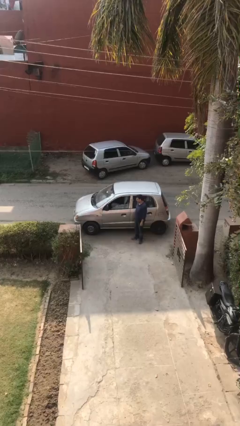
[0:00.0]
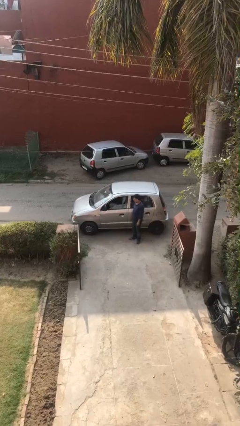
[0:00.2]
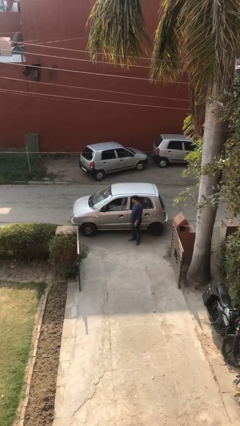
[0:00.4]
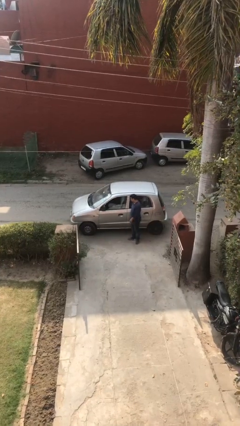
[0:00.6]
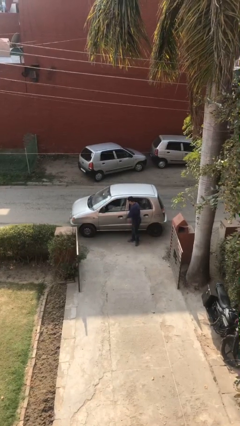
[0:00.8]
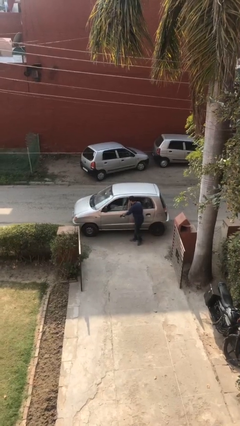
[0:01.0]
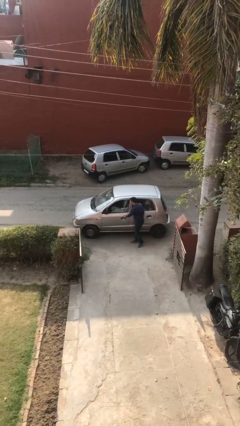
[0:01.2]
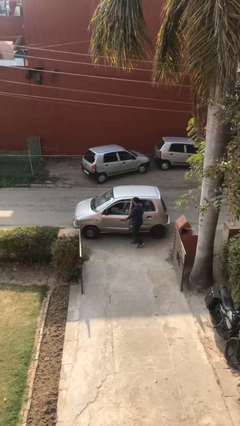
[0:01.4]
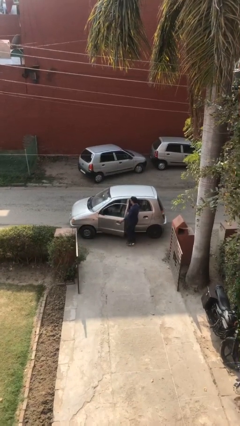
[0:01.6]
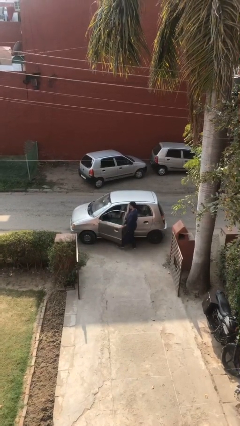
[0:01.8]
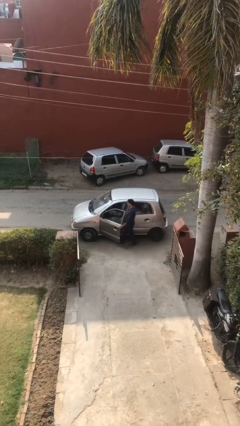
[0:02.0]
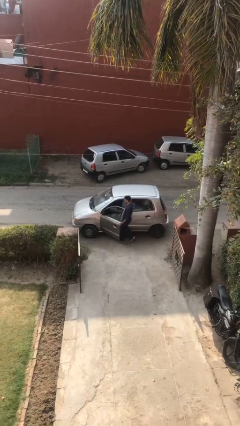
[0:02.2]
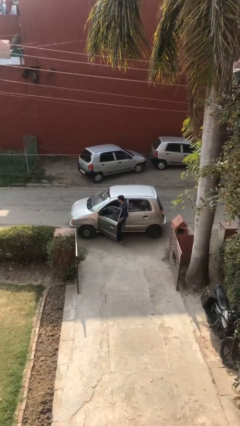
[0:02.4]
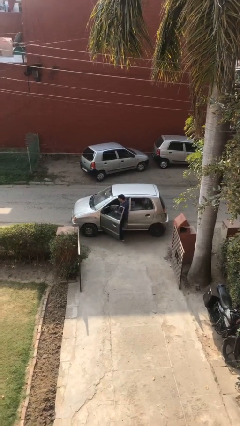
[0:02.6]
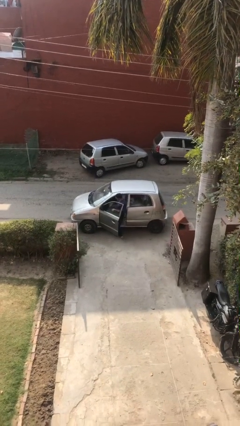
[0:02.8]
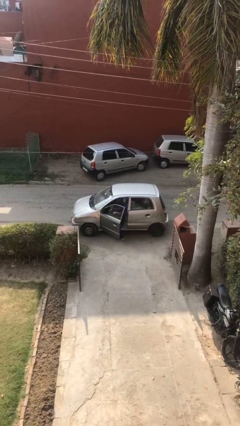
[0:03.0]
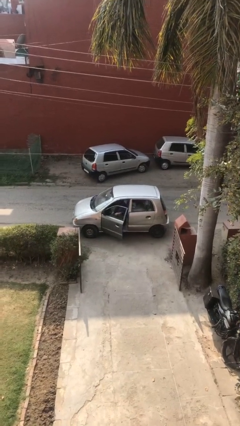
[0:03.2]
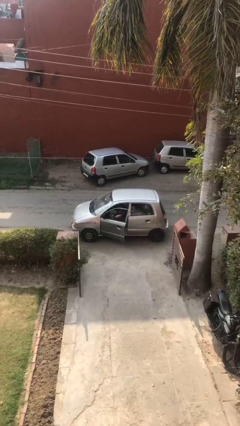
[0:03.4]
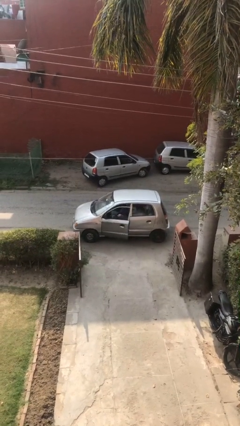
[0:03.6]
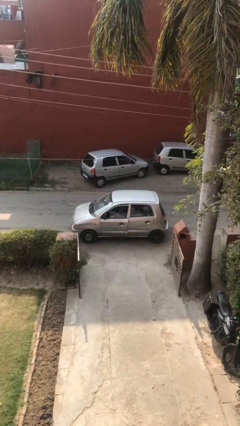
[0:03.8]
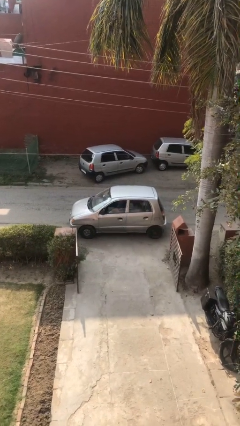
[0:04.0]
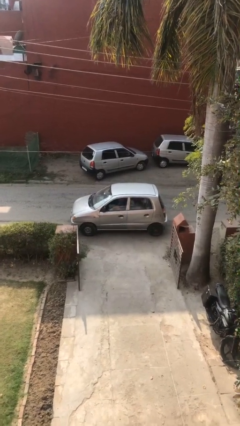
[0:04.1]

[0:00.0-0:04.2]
car picks up person

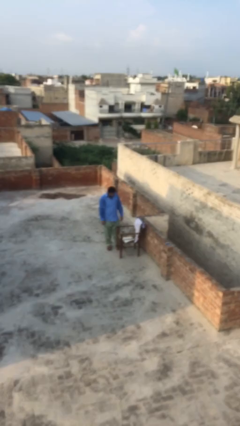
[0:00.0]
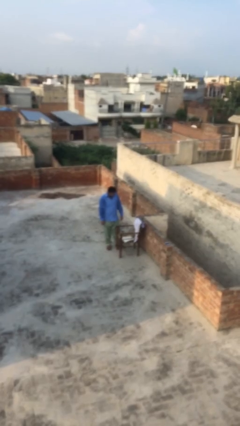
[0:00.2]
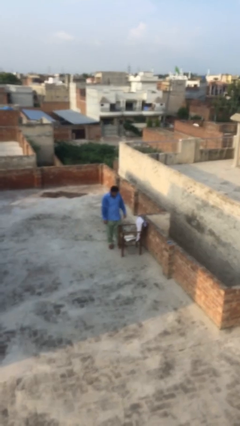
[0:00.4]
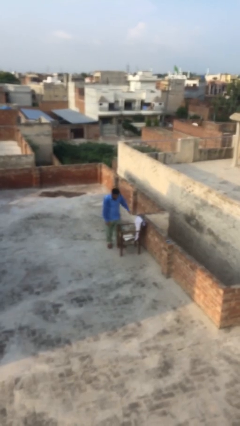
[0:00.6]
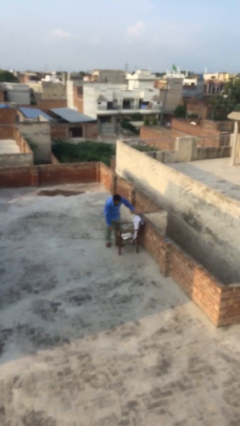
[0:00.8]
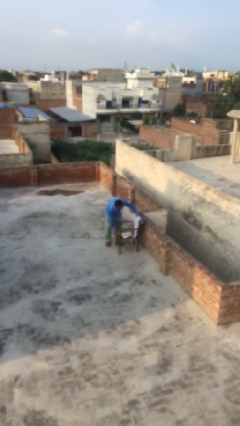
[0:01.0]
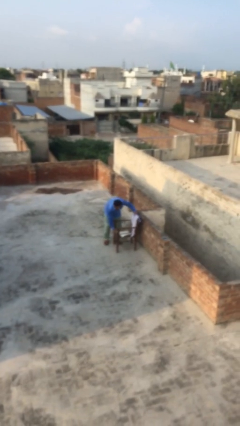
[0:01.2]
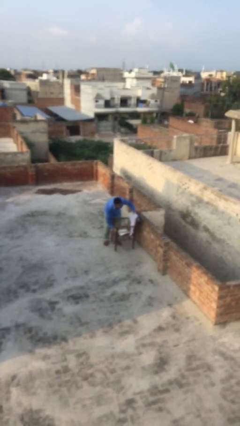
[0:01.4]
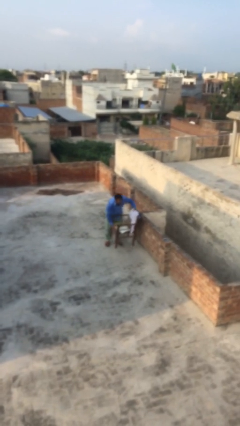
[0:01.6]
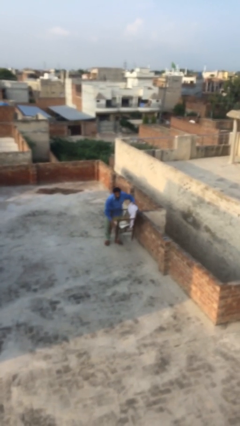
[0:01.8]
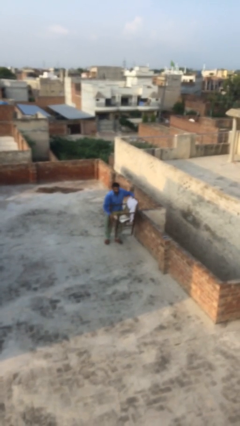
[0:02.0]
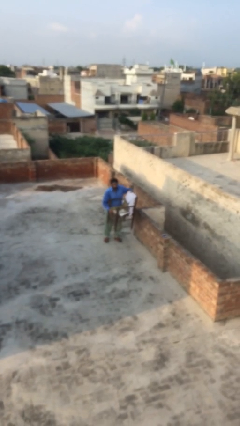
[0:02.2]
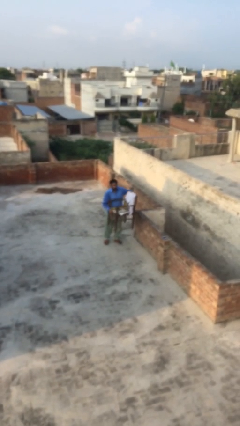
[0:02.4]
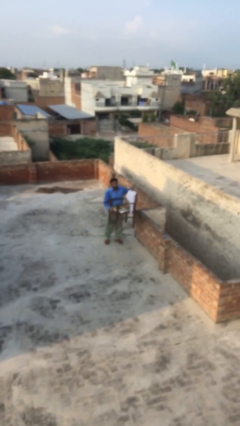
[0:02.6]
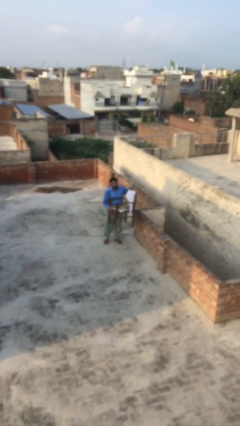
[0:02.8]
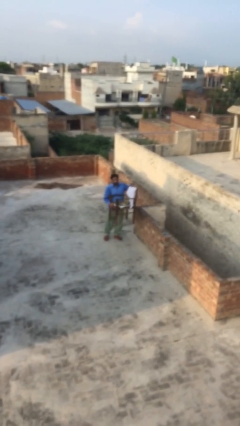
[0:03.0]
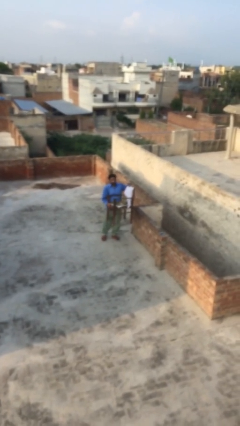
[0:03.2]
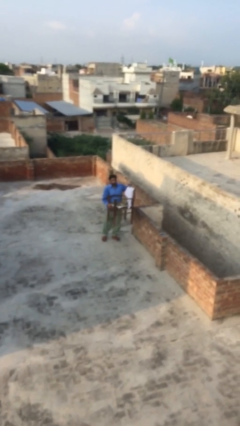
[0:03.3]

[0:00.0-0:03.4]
person picks up object from floor

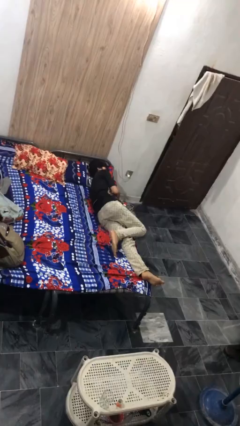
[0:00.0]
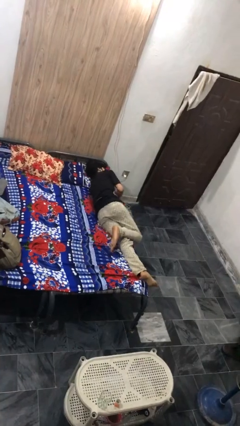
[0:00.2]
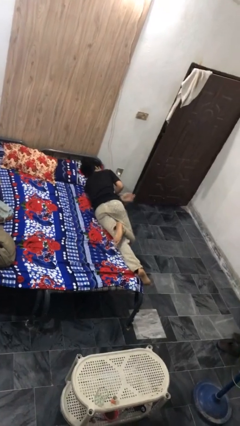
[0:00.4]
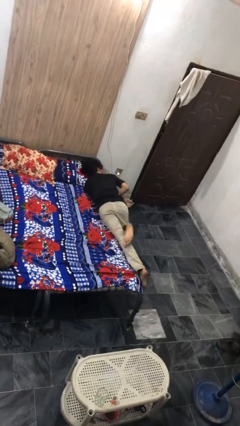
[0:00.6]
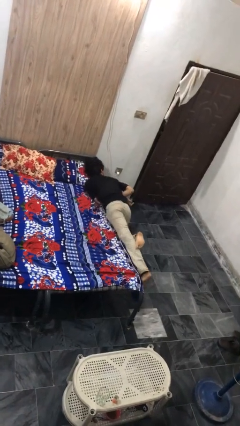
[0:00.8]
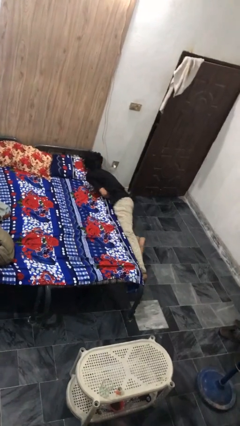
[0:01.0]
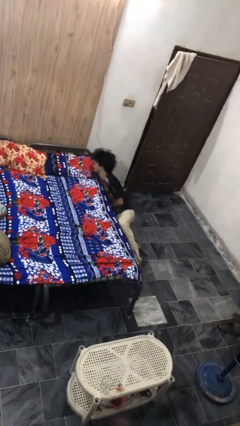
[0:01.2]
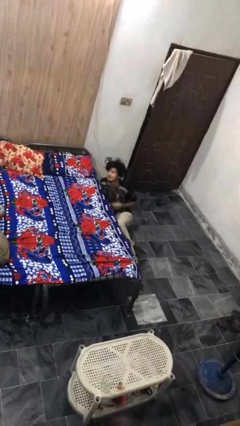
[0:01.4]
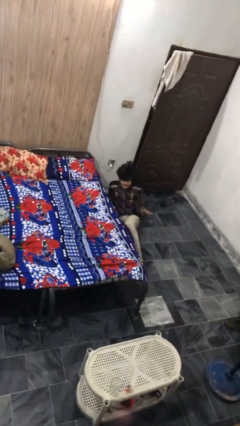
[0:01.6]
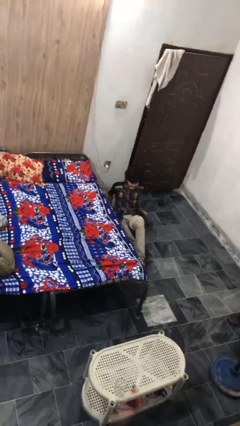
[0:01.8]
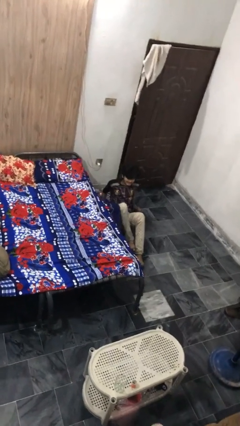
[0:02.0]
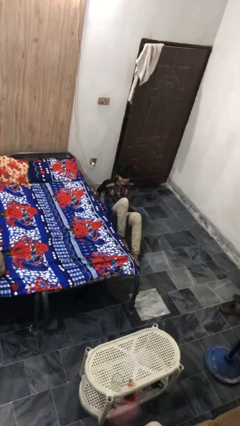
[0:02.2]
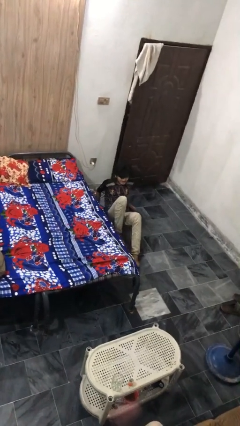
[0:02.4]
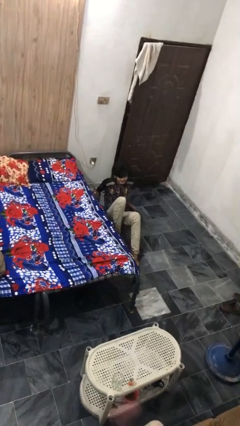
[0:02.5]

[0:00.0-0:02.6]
person falls from bed

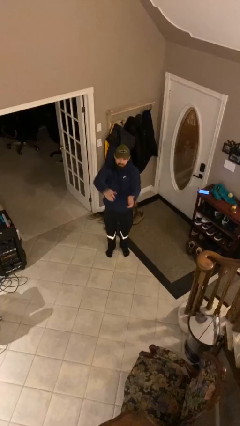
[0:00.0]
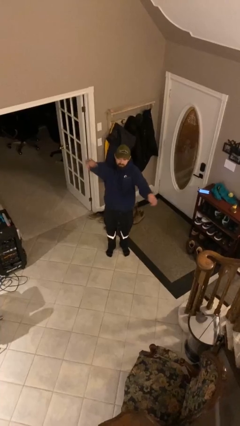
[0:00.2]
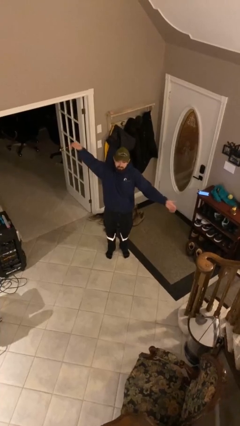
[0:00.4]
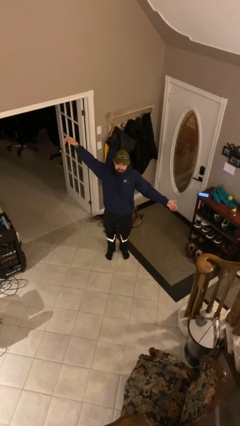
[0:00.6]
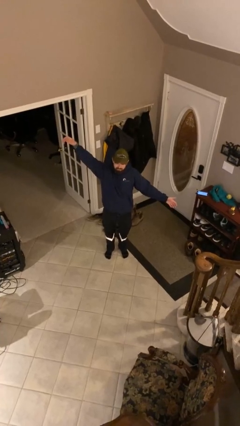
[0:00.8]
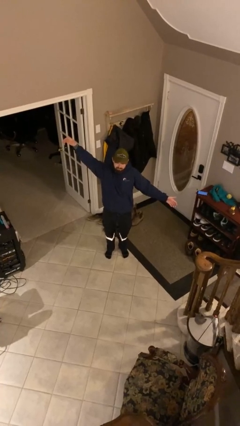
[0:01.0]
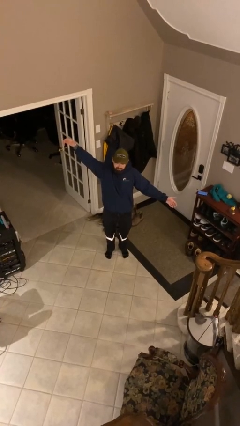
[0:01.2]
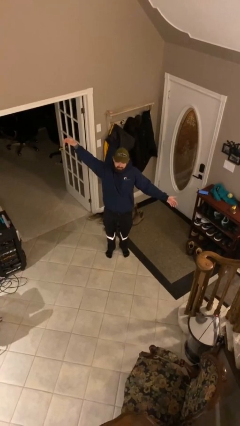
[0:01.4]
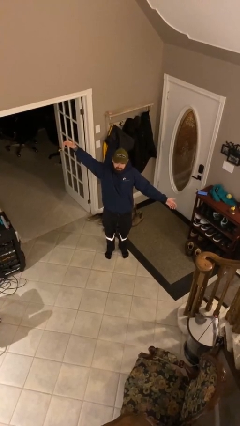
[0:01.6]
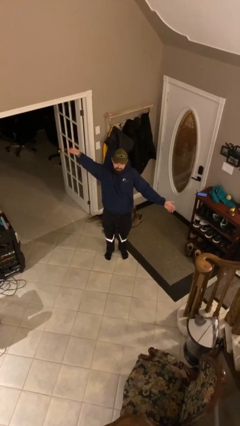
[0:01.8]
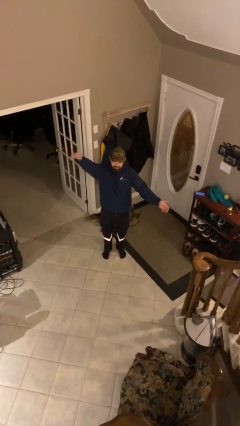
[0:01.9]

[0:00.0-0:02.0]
person gestures zoom in

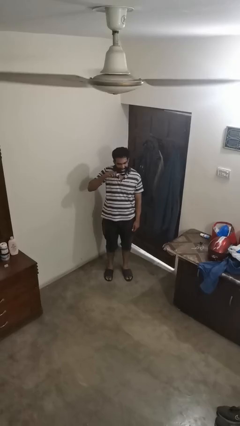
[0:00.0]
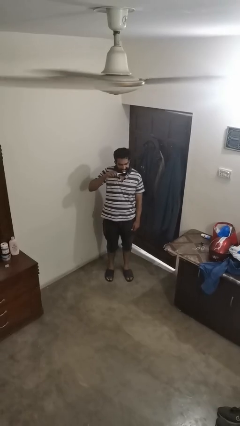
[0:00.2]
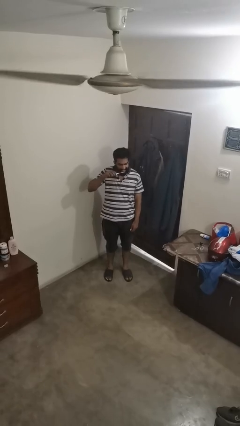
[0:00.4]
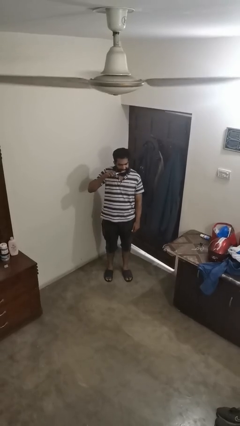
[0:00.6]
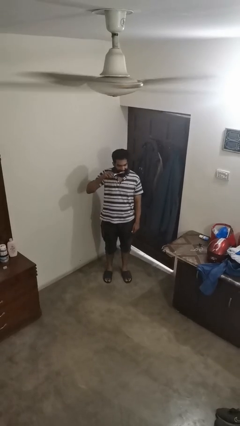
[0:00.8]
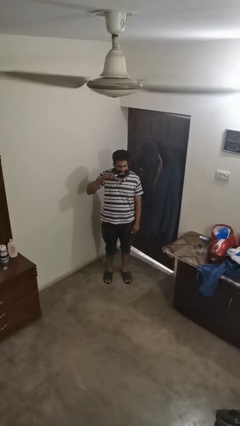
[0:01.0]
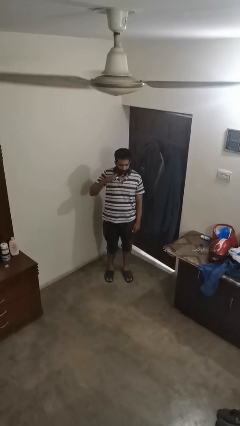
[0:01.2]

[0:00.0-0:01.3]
person brushes teeth

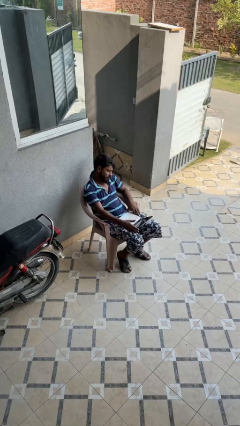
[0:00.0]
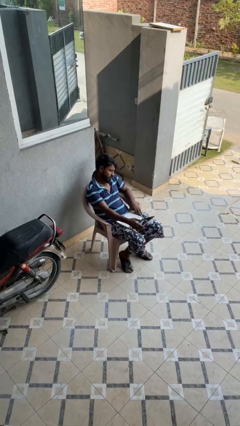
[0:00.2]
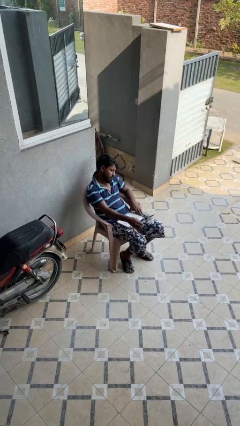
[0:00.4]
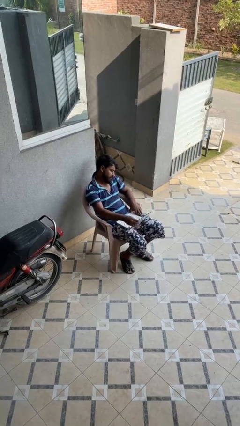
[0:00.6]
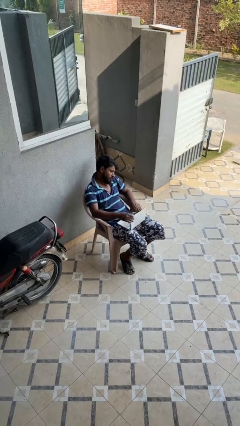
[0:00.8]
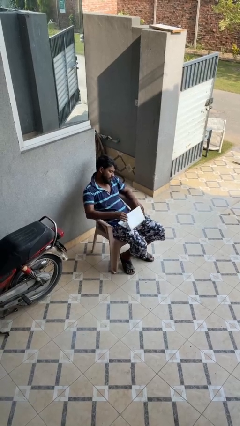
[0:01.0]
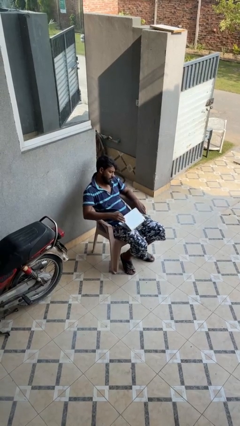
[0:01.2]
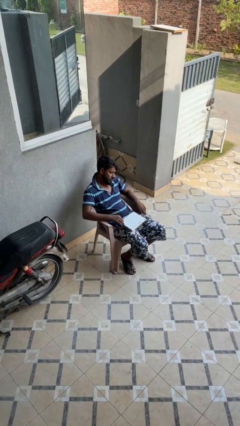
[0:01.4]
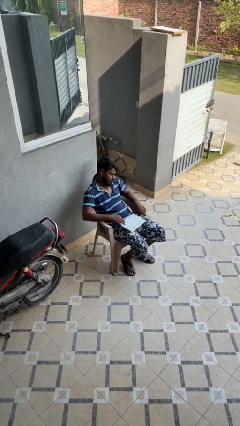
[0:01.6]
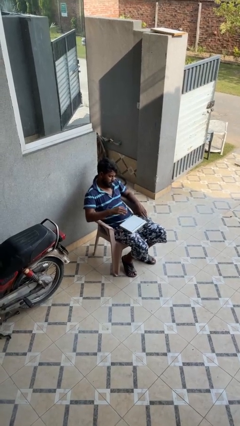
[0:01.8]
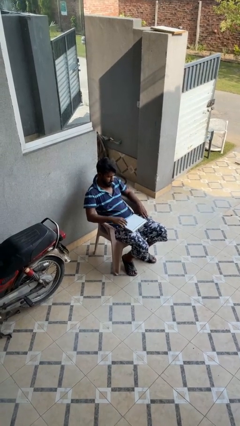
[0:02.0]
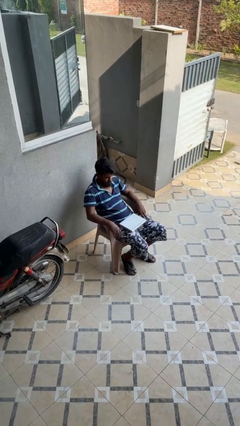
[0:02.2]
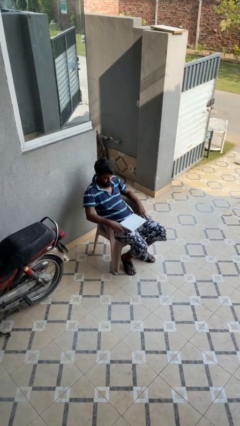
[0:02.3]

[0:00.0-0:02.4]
person closes laptop

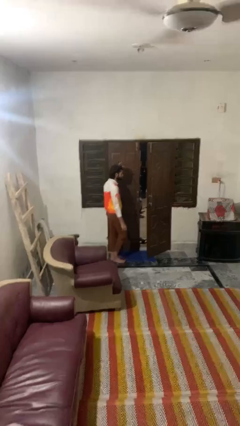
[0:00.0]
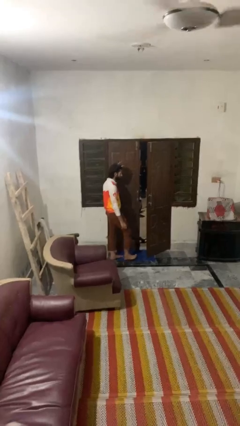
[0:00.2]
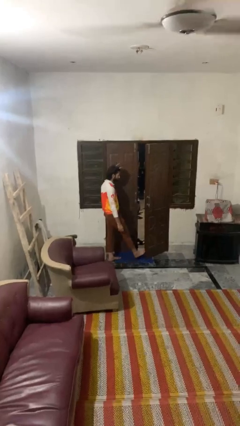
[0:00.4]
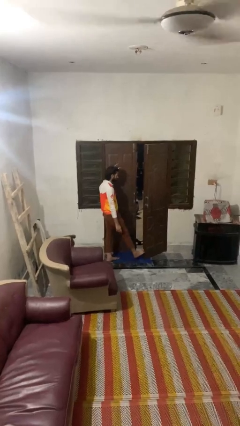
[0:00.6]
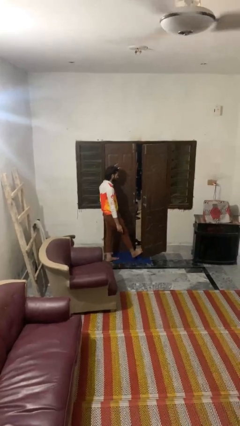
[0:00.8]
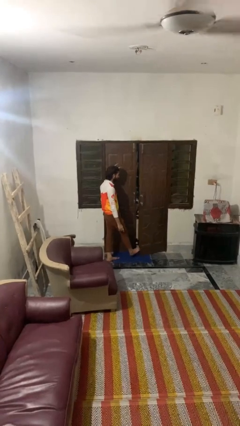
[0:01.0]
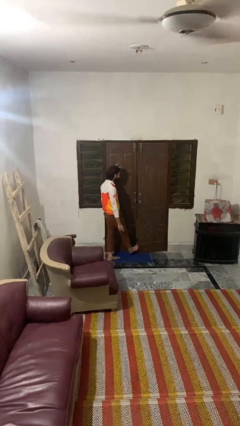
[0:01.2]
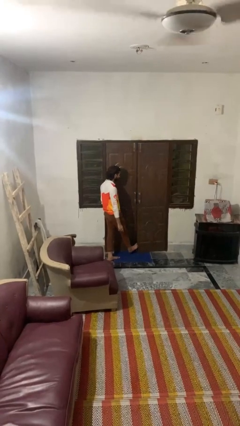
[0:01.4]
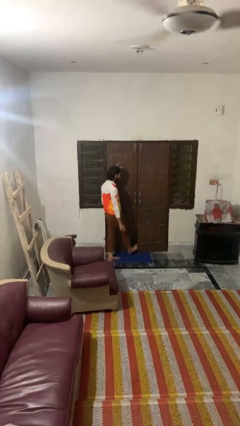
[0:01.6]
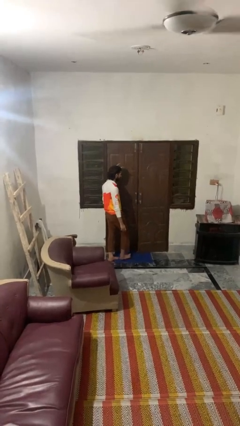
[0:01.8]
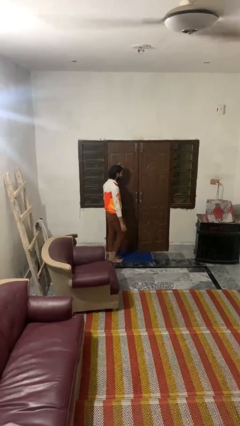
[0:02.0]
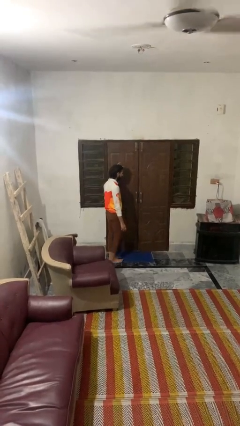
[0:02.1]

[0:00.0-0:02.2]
person closes door with foot
